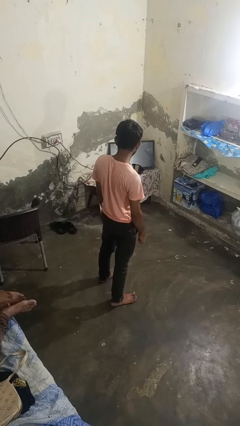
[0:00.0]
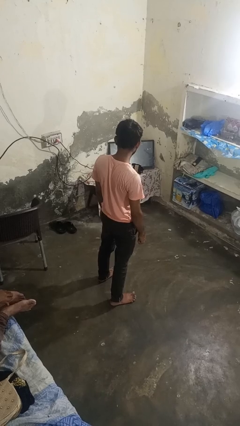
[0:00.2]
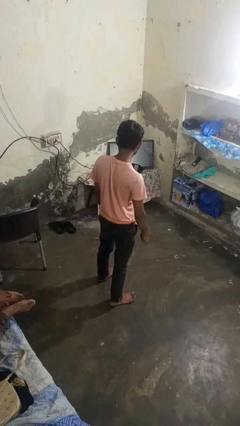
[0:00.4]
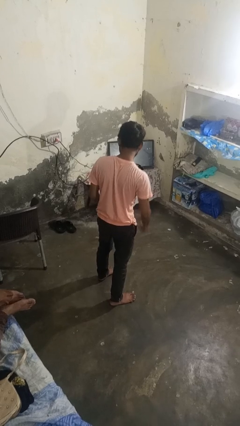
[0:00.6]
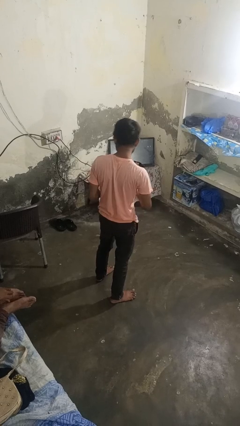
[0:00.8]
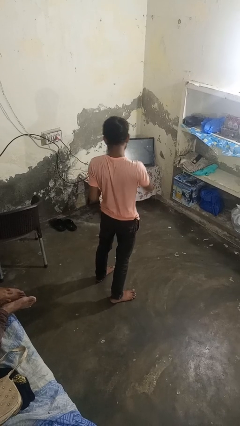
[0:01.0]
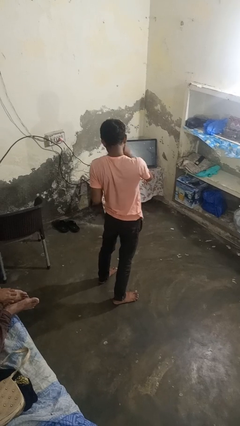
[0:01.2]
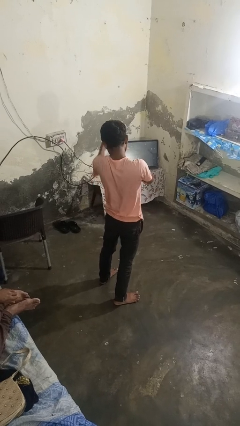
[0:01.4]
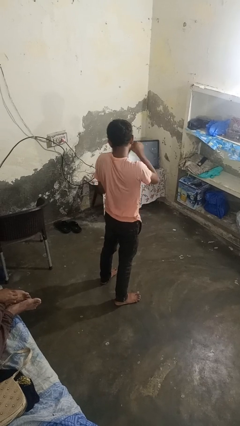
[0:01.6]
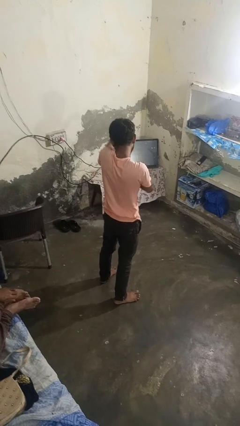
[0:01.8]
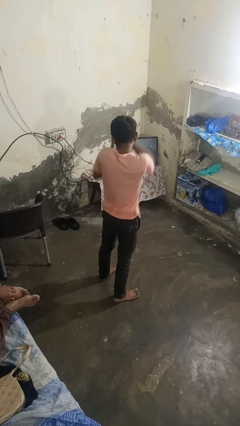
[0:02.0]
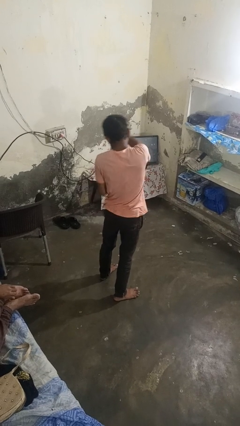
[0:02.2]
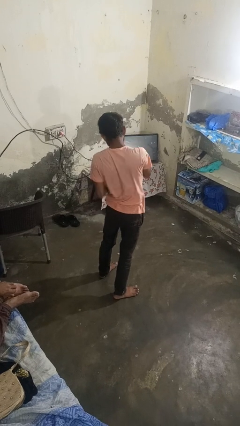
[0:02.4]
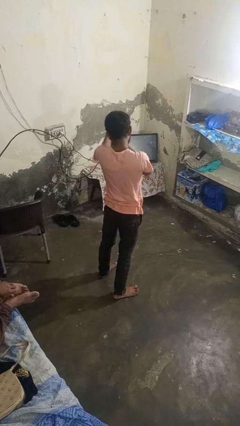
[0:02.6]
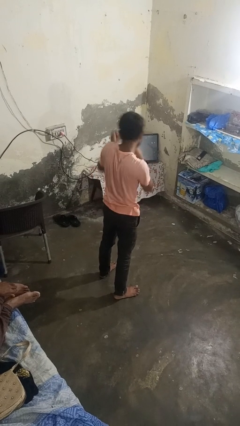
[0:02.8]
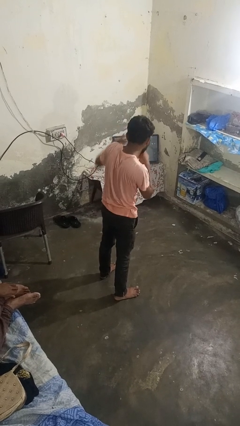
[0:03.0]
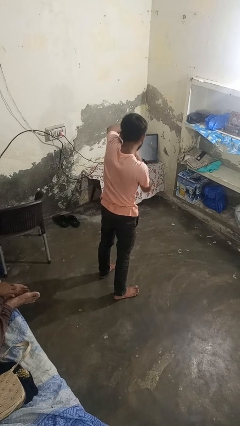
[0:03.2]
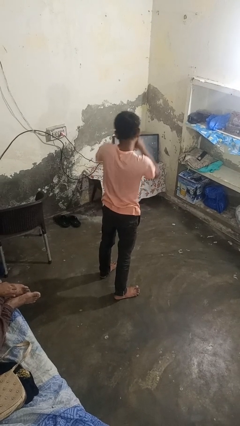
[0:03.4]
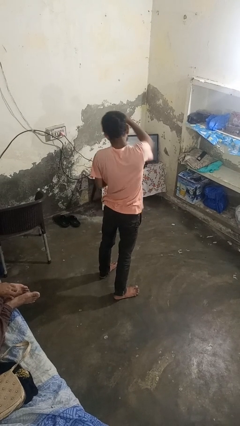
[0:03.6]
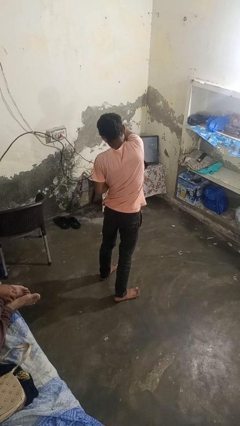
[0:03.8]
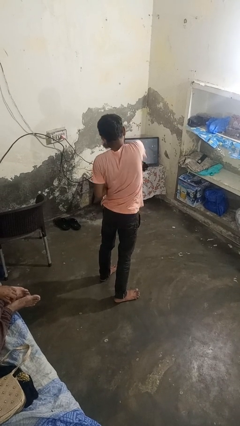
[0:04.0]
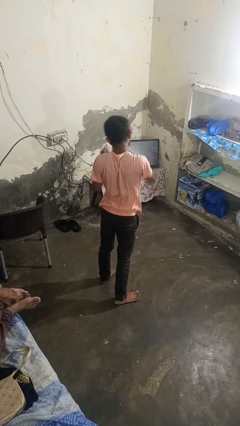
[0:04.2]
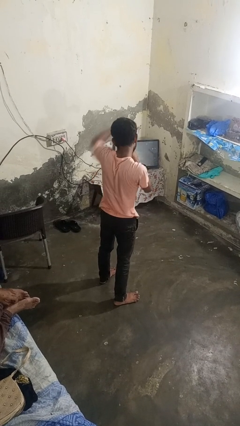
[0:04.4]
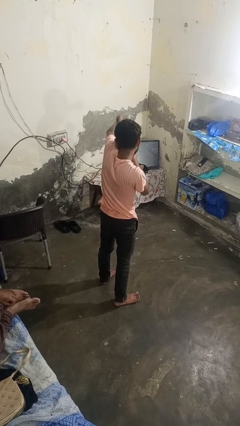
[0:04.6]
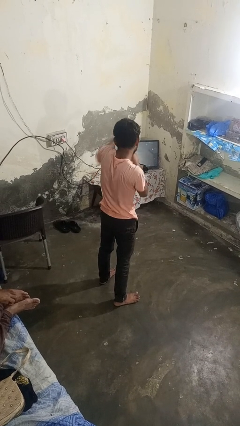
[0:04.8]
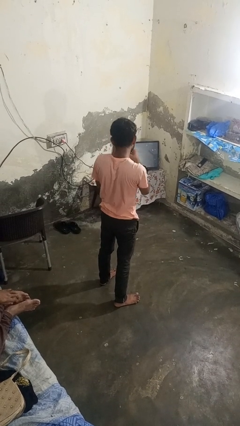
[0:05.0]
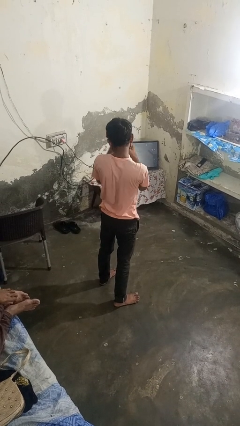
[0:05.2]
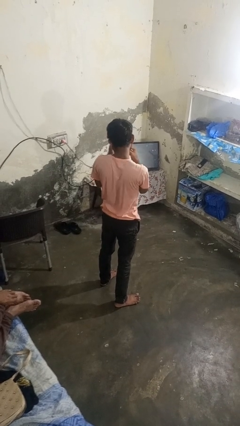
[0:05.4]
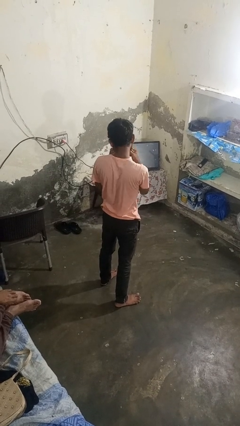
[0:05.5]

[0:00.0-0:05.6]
person punches

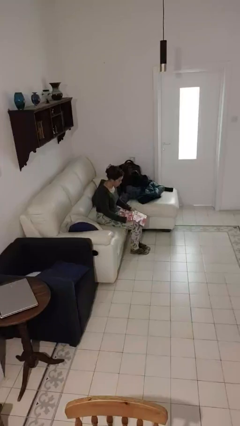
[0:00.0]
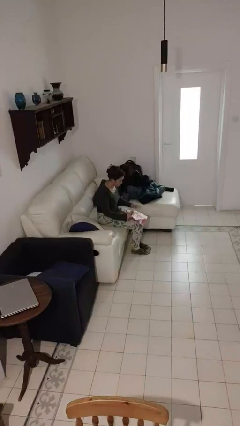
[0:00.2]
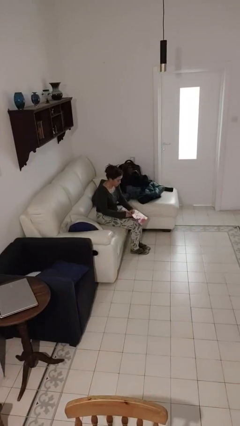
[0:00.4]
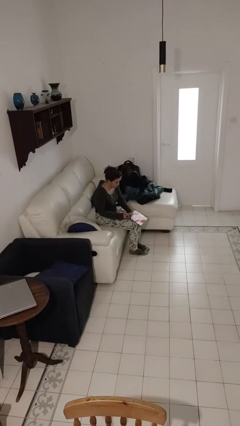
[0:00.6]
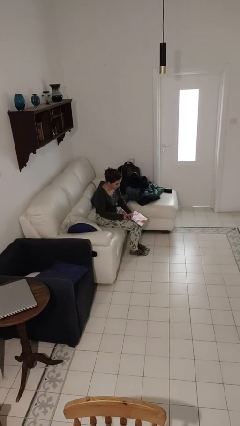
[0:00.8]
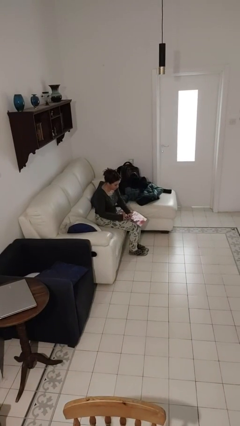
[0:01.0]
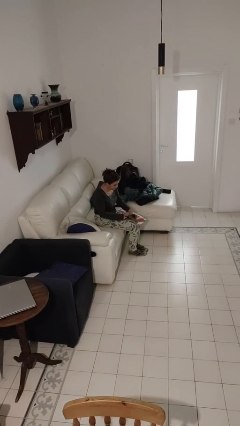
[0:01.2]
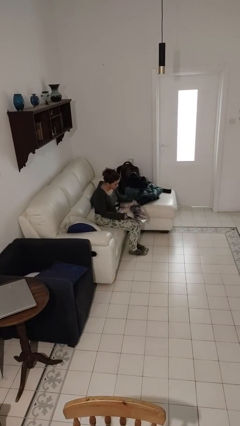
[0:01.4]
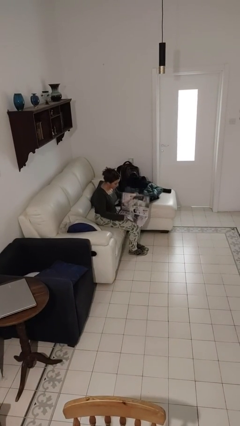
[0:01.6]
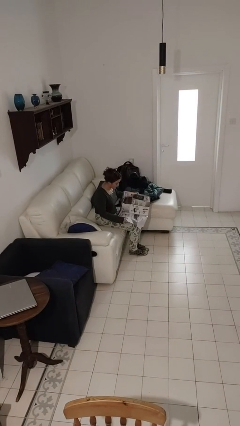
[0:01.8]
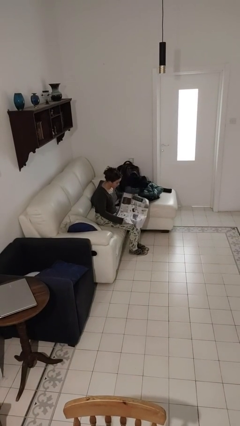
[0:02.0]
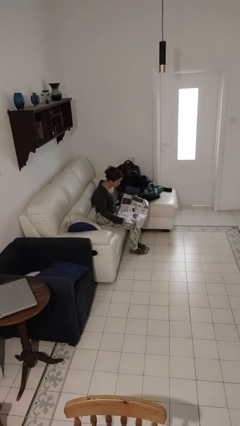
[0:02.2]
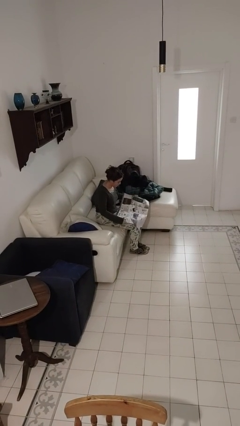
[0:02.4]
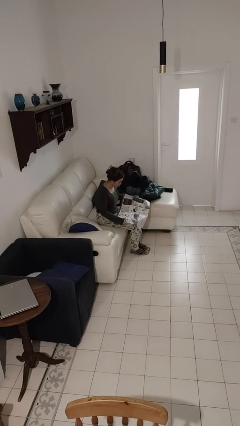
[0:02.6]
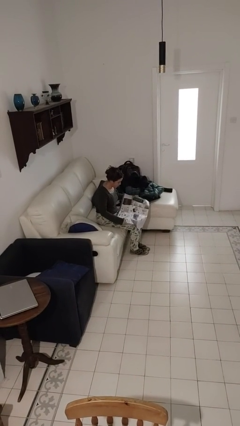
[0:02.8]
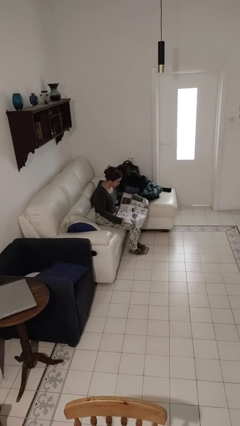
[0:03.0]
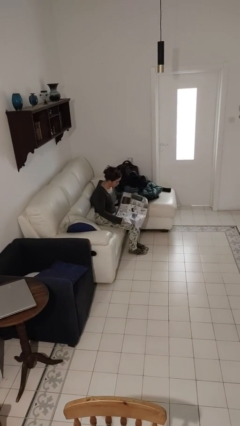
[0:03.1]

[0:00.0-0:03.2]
person reads newspaper

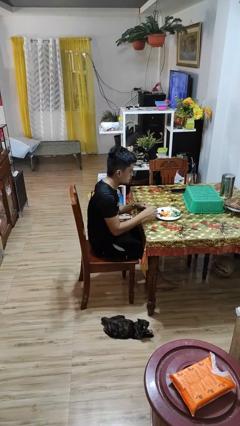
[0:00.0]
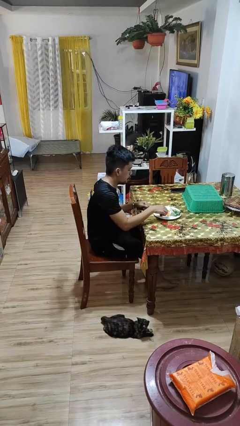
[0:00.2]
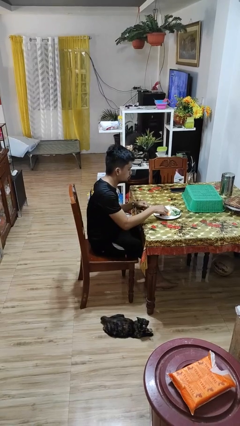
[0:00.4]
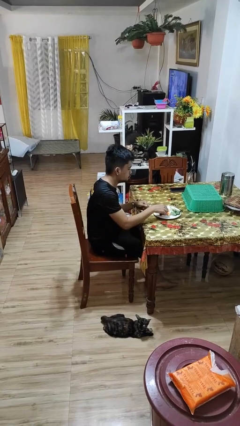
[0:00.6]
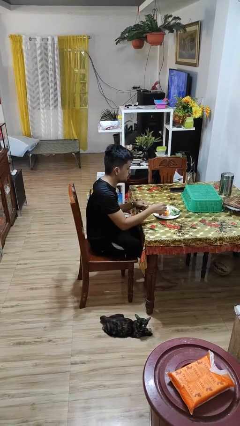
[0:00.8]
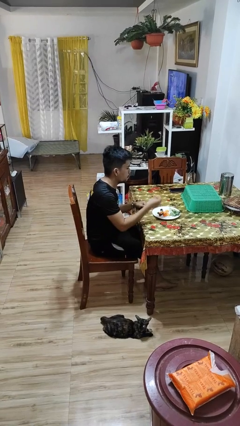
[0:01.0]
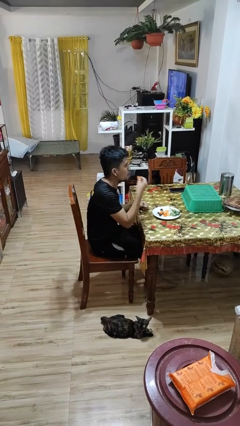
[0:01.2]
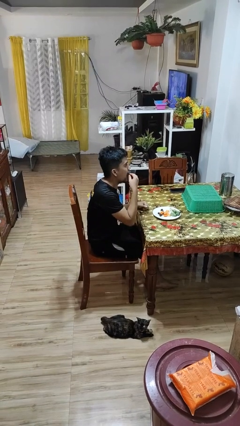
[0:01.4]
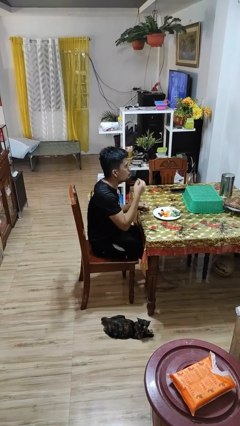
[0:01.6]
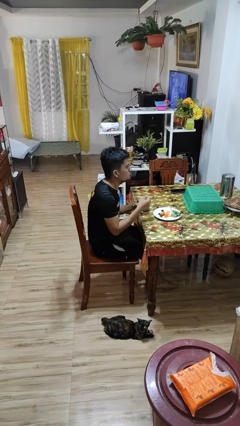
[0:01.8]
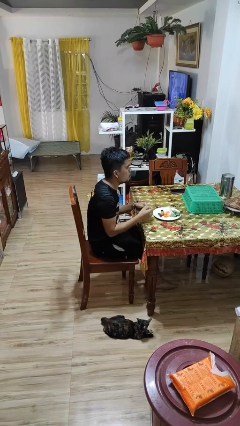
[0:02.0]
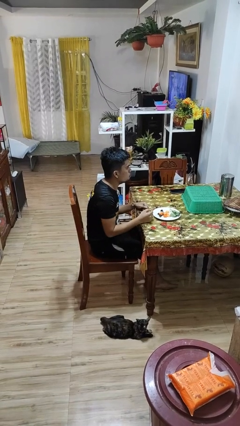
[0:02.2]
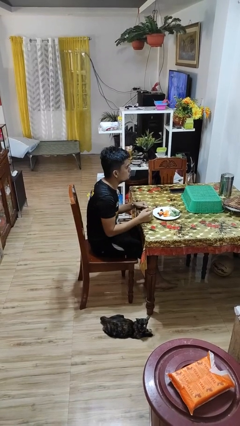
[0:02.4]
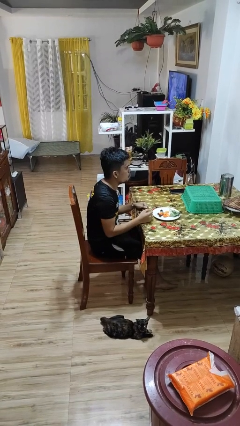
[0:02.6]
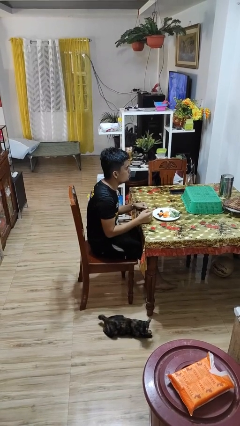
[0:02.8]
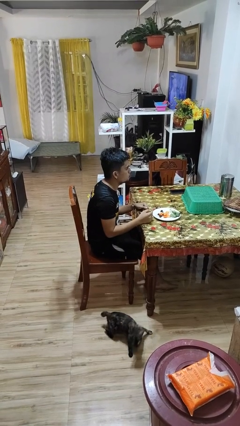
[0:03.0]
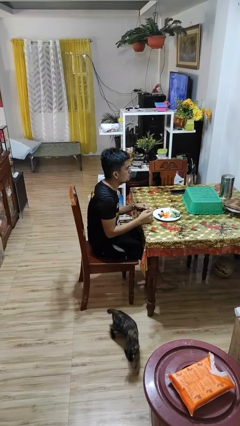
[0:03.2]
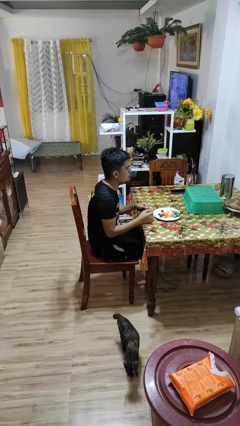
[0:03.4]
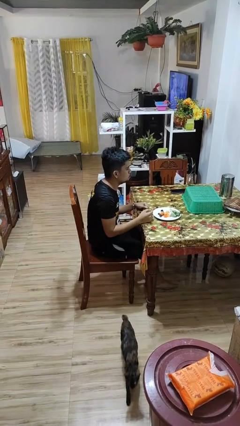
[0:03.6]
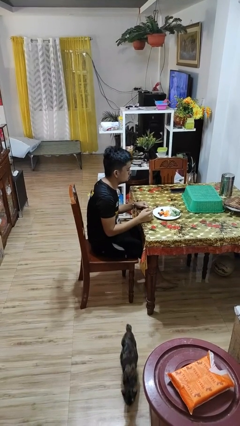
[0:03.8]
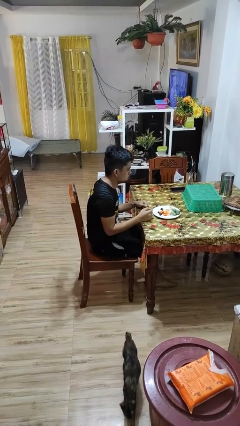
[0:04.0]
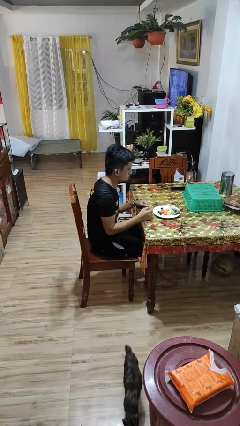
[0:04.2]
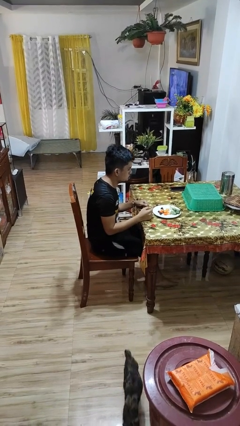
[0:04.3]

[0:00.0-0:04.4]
person eats with hands

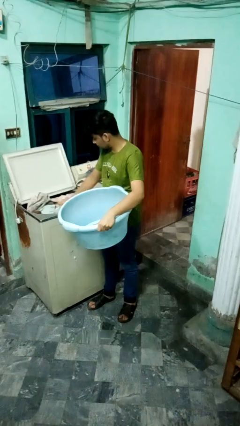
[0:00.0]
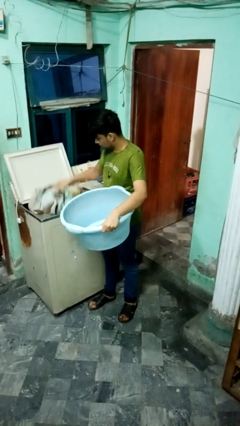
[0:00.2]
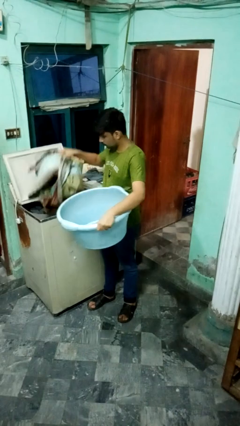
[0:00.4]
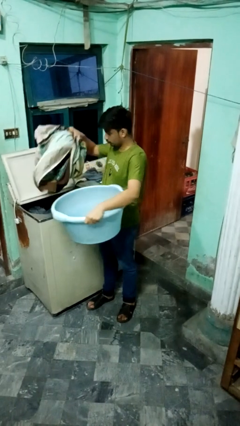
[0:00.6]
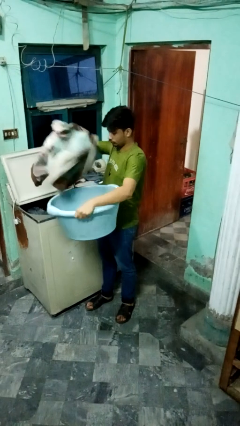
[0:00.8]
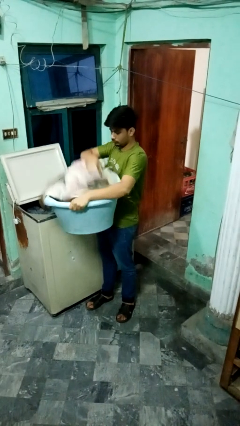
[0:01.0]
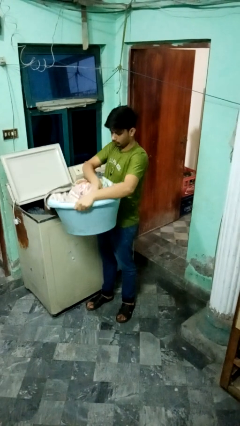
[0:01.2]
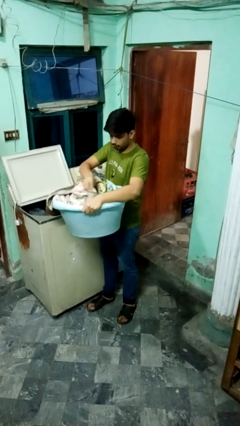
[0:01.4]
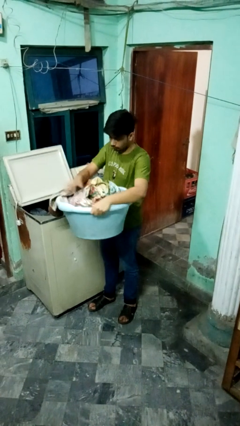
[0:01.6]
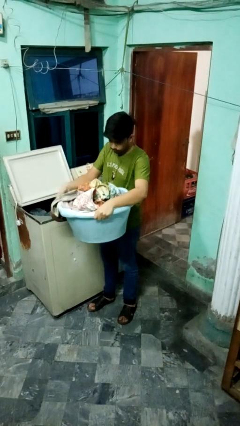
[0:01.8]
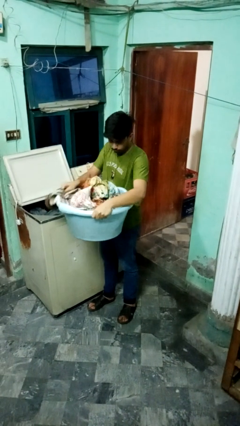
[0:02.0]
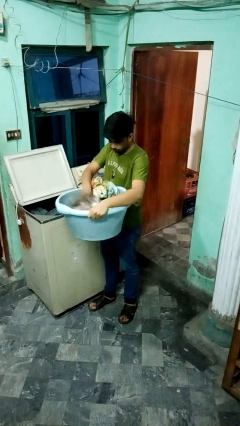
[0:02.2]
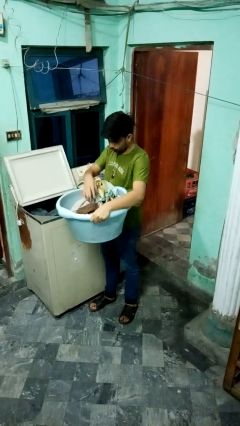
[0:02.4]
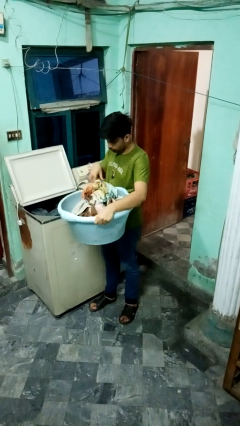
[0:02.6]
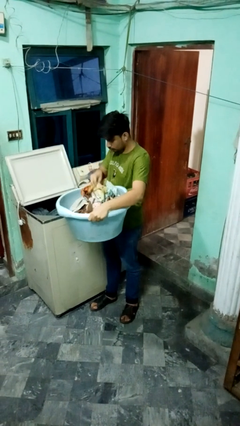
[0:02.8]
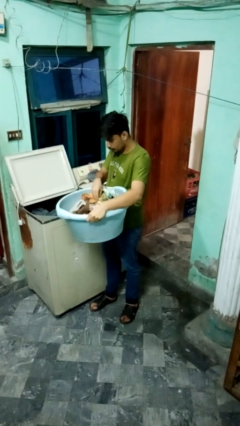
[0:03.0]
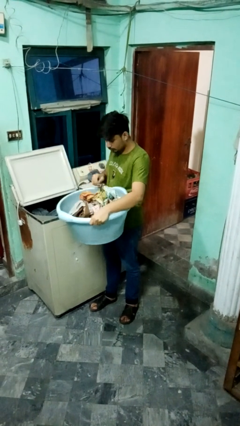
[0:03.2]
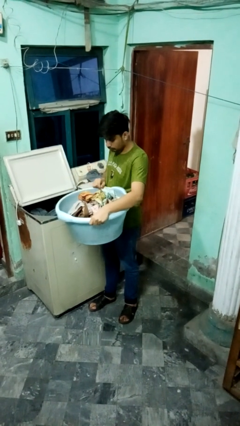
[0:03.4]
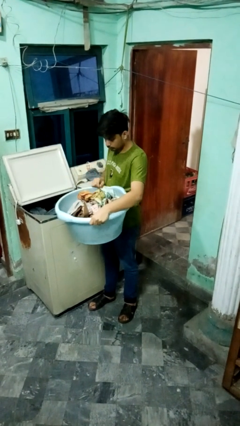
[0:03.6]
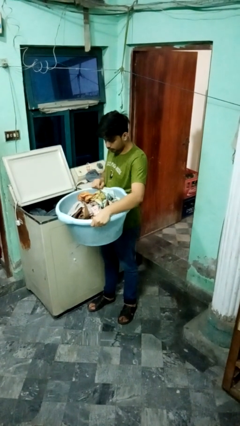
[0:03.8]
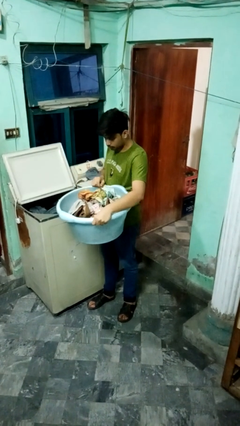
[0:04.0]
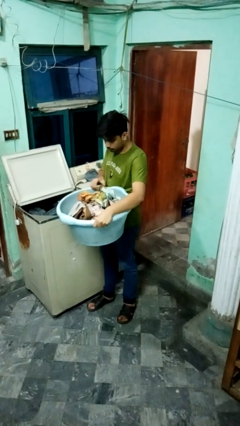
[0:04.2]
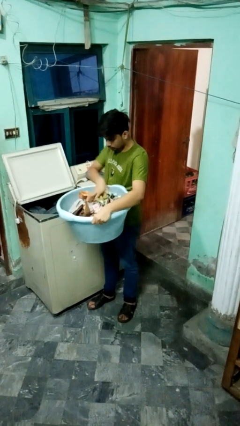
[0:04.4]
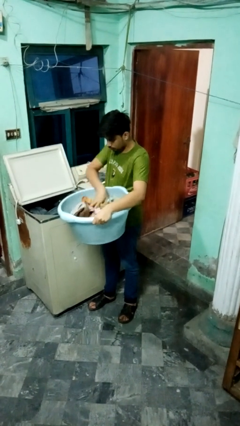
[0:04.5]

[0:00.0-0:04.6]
person unloads clotheswasher

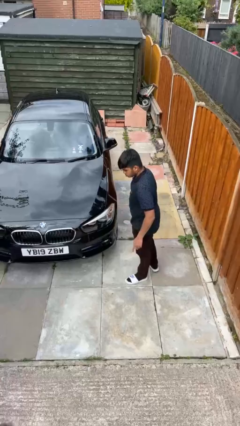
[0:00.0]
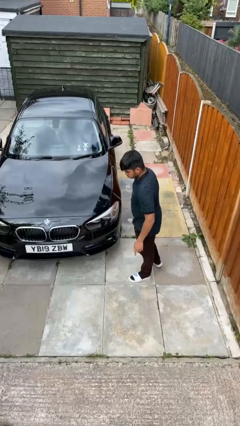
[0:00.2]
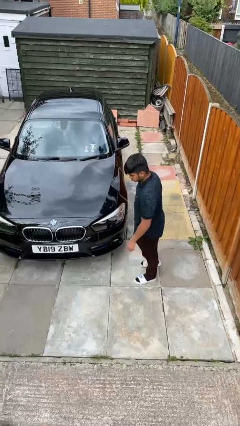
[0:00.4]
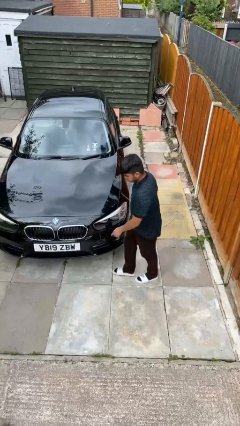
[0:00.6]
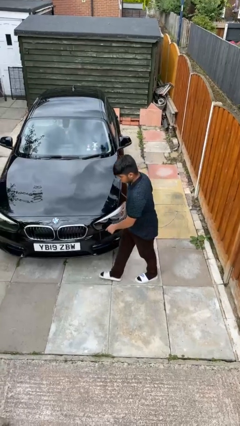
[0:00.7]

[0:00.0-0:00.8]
person walks around car
